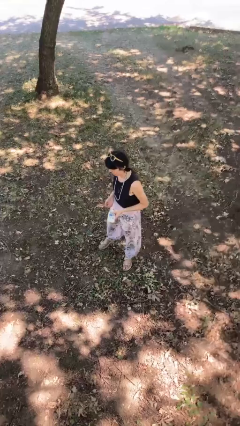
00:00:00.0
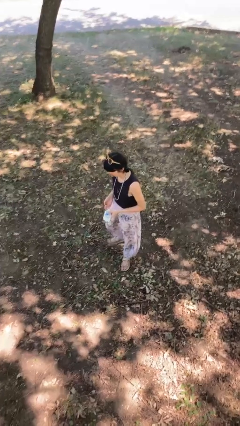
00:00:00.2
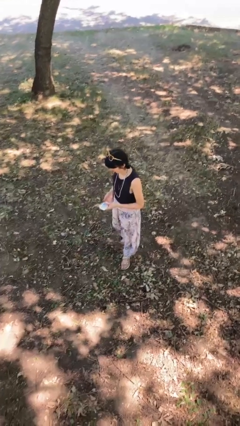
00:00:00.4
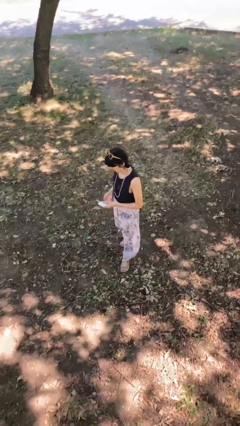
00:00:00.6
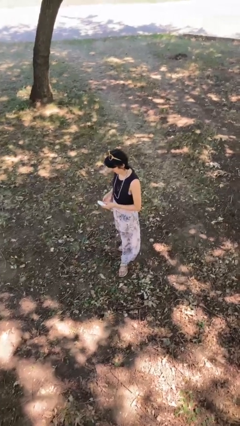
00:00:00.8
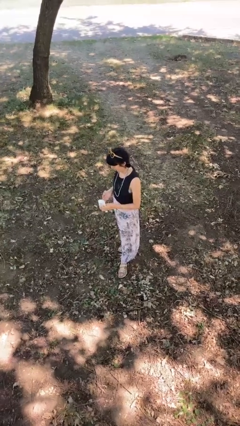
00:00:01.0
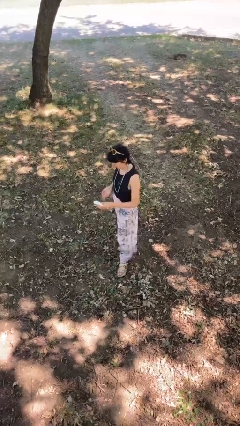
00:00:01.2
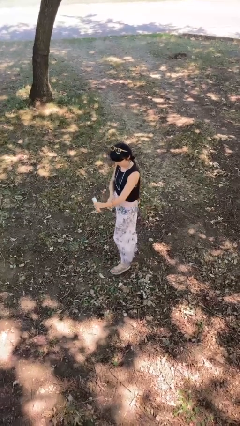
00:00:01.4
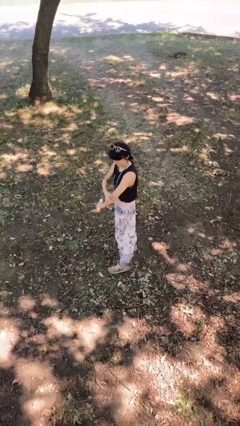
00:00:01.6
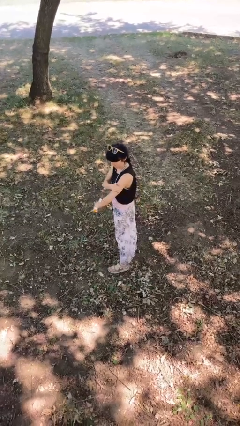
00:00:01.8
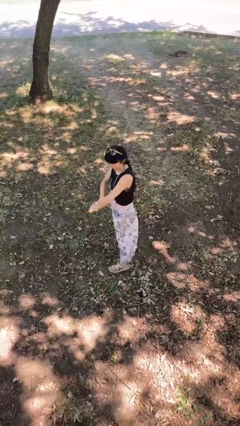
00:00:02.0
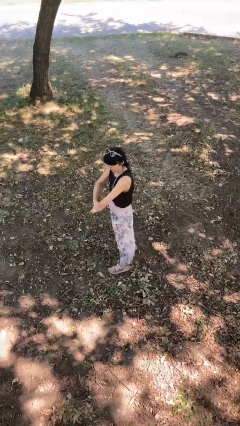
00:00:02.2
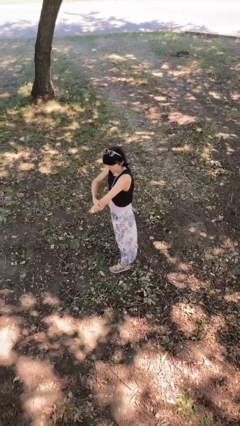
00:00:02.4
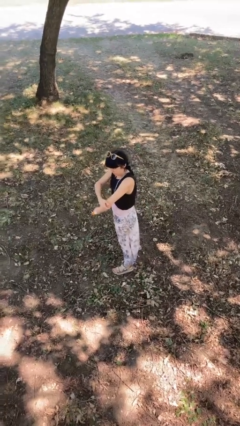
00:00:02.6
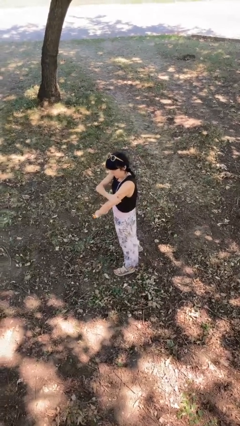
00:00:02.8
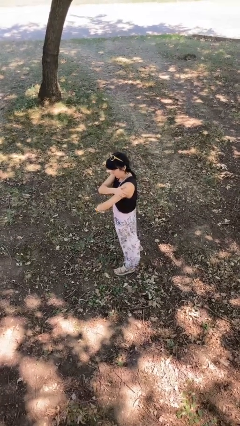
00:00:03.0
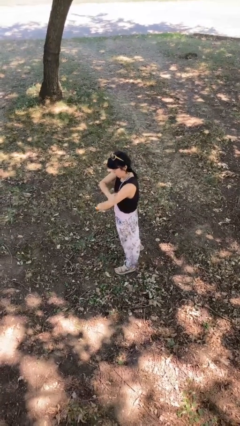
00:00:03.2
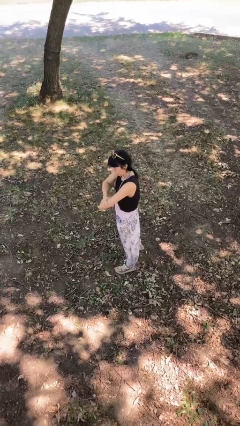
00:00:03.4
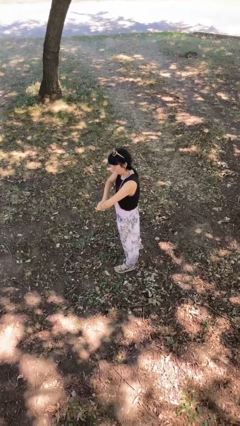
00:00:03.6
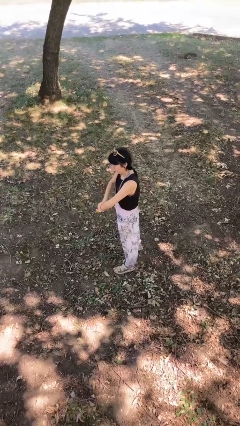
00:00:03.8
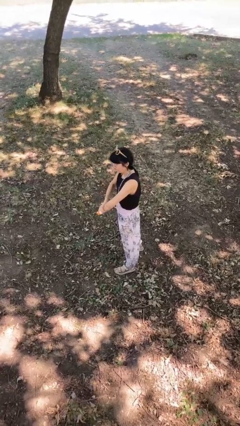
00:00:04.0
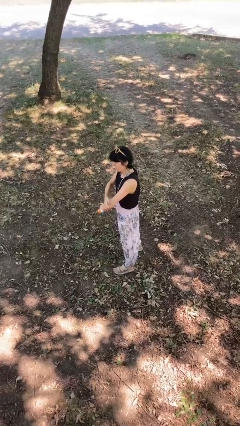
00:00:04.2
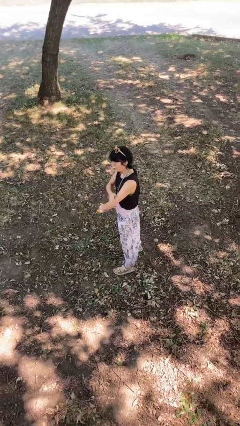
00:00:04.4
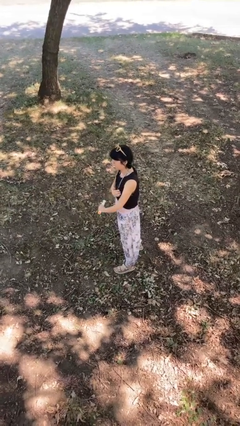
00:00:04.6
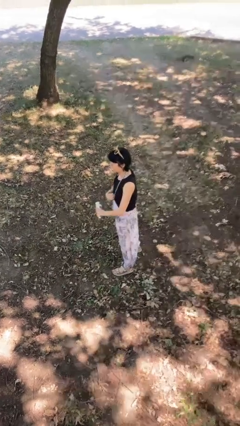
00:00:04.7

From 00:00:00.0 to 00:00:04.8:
person applies sunscreen

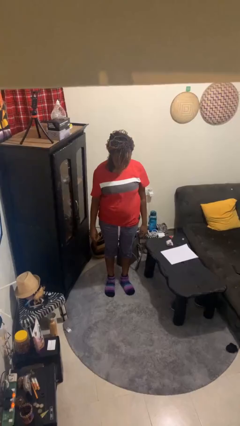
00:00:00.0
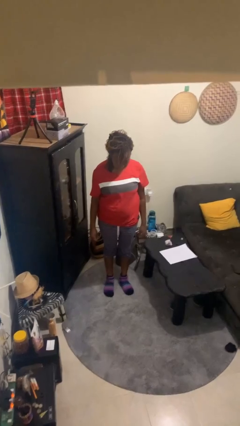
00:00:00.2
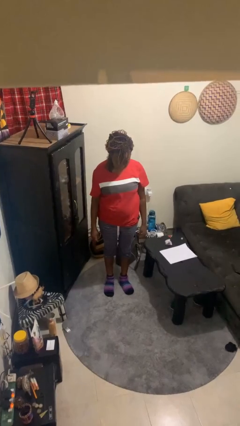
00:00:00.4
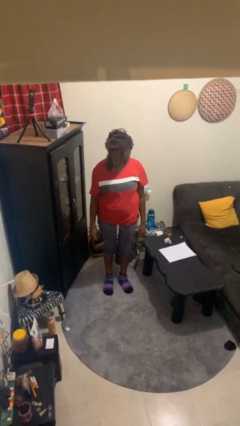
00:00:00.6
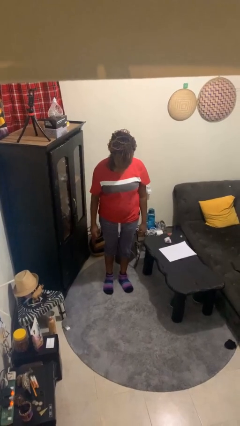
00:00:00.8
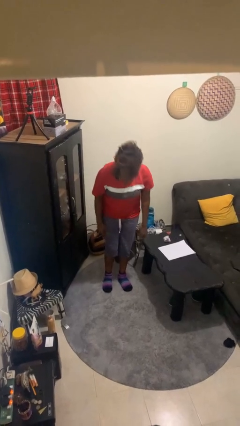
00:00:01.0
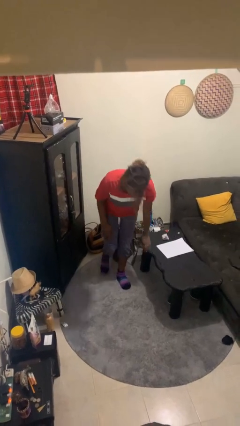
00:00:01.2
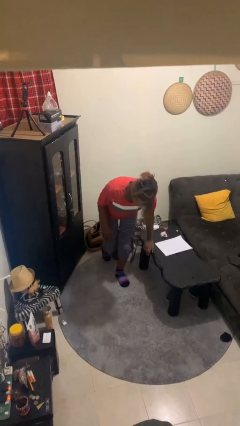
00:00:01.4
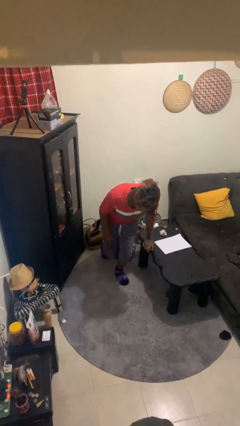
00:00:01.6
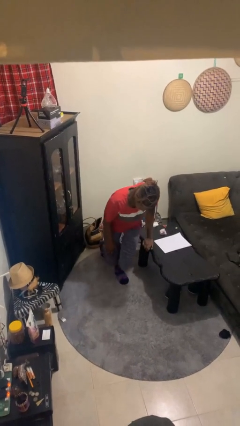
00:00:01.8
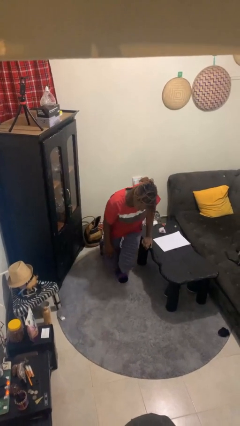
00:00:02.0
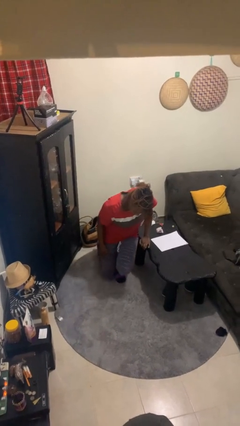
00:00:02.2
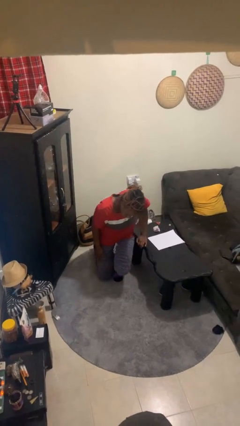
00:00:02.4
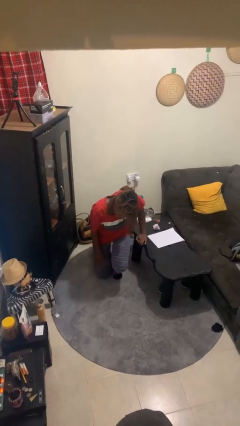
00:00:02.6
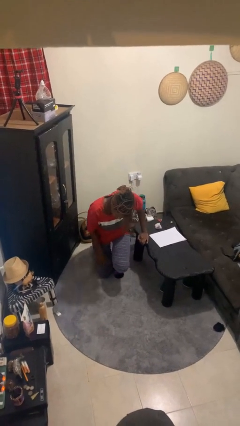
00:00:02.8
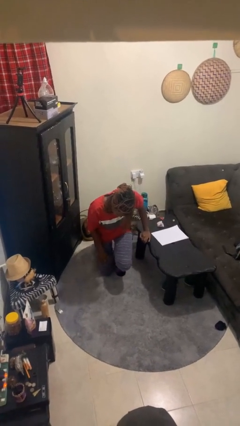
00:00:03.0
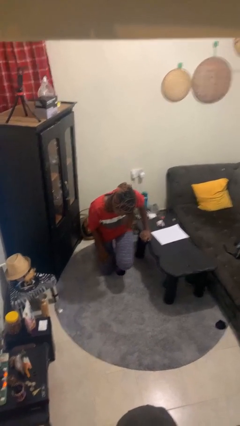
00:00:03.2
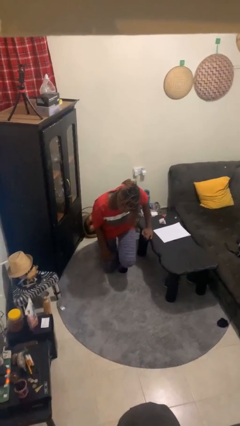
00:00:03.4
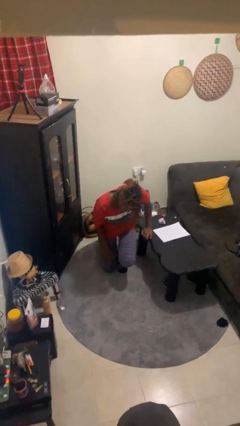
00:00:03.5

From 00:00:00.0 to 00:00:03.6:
person kneels

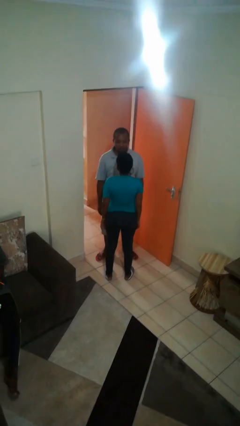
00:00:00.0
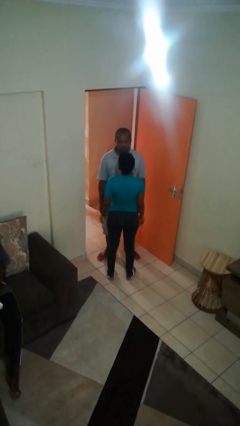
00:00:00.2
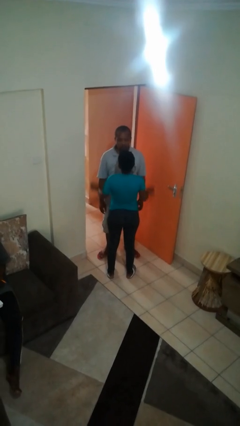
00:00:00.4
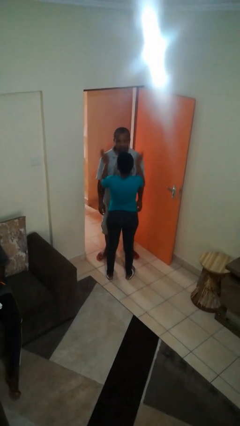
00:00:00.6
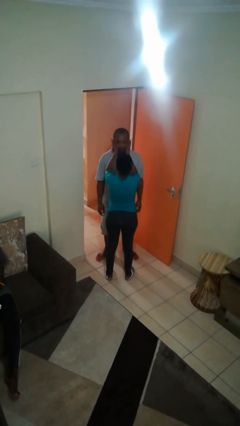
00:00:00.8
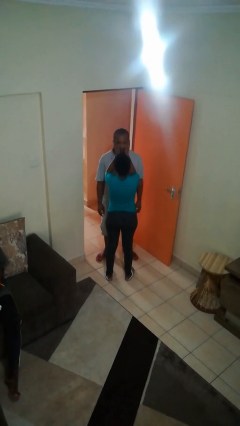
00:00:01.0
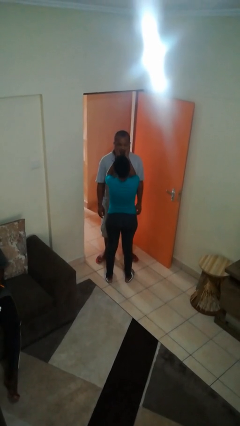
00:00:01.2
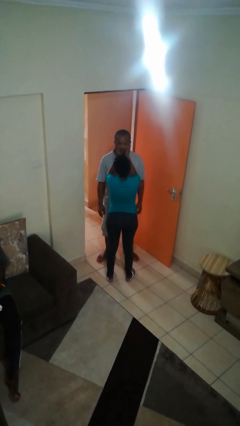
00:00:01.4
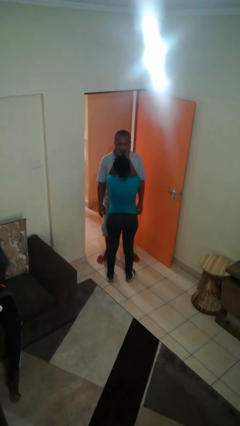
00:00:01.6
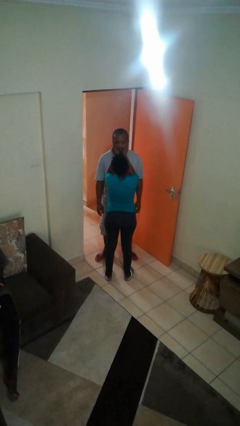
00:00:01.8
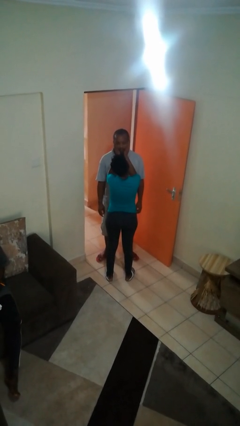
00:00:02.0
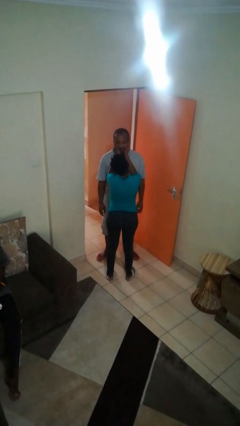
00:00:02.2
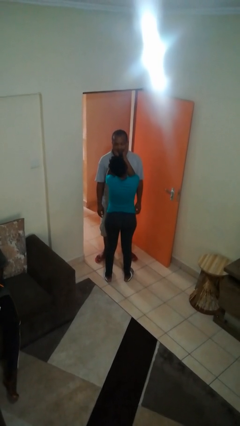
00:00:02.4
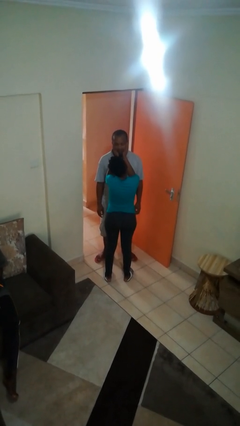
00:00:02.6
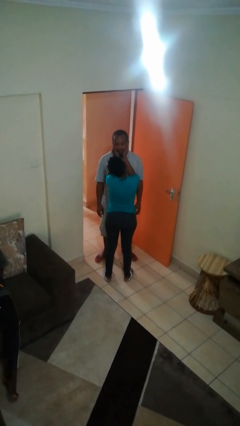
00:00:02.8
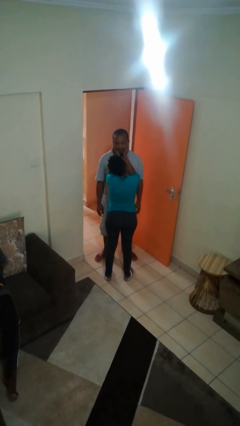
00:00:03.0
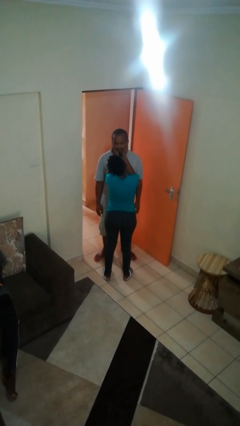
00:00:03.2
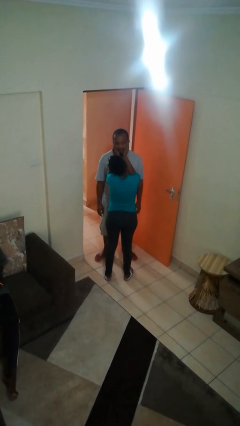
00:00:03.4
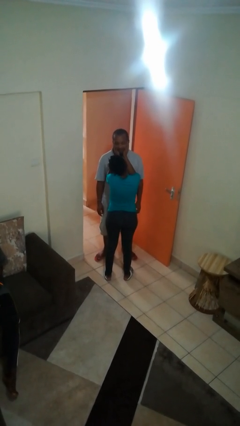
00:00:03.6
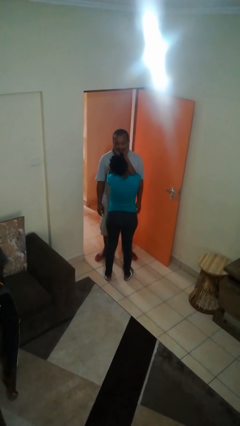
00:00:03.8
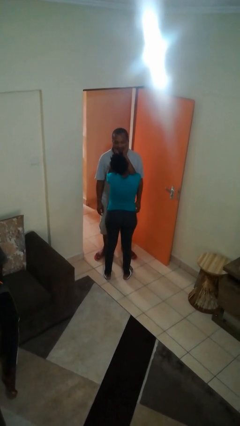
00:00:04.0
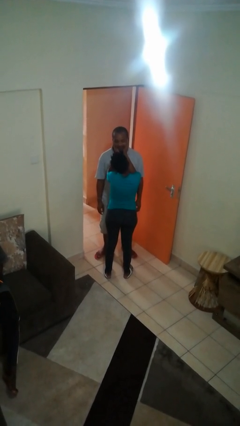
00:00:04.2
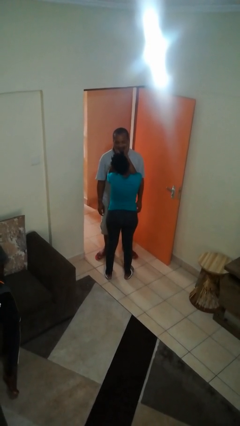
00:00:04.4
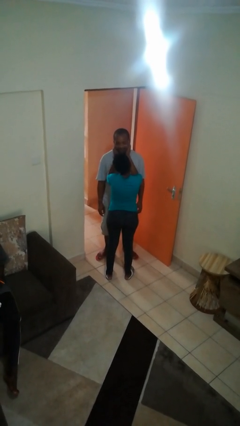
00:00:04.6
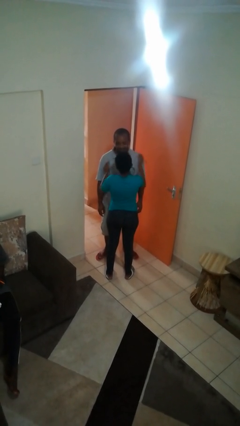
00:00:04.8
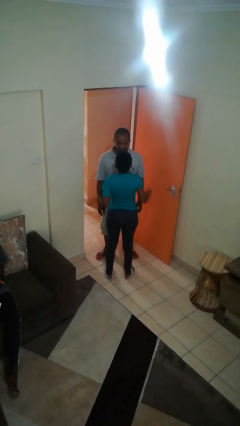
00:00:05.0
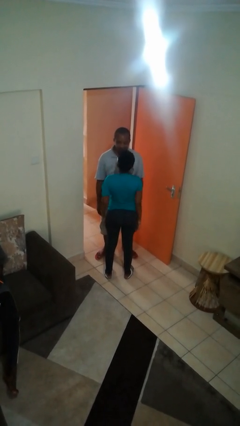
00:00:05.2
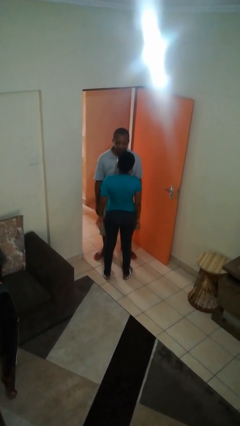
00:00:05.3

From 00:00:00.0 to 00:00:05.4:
person touches face of person

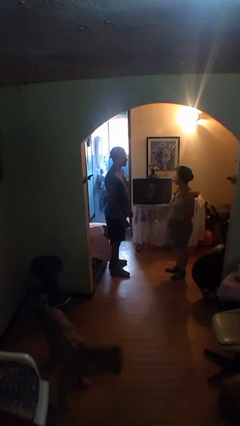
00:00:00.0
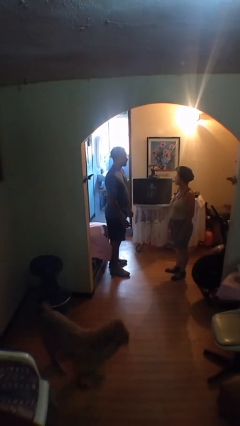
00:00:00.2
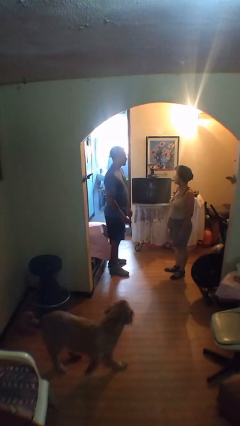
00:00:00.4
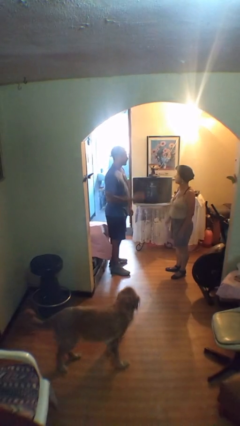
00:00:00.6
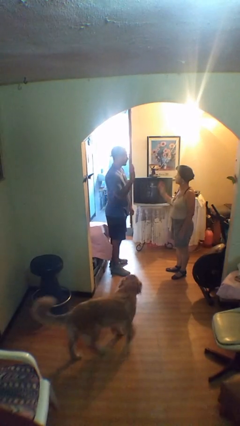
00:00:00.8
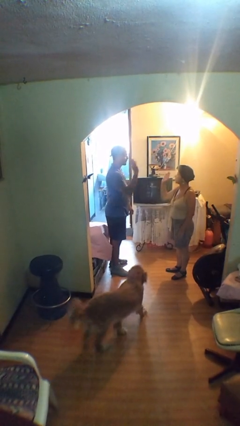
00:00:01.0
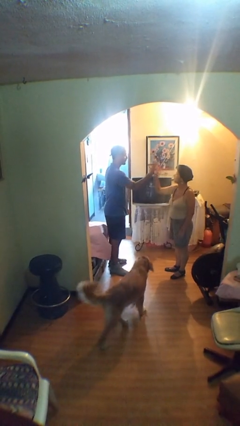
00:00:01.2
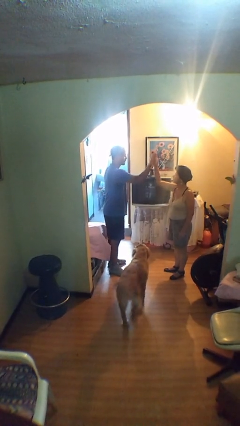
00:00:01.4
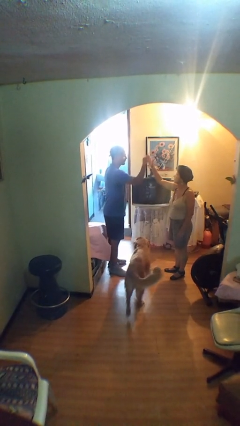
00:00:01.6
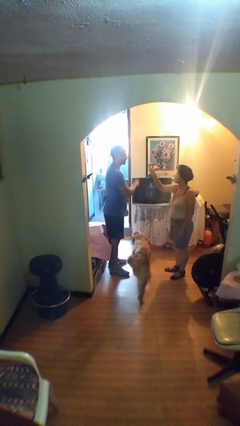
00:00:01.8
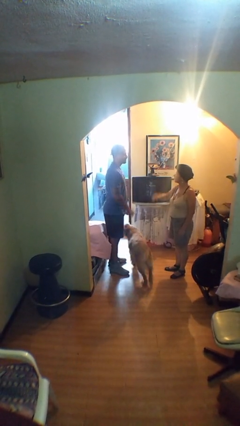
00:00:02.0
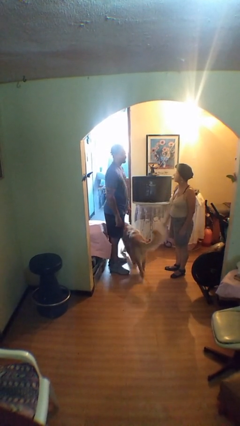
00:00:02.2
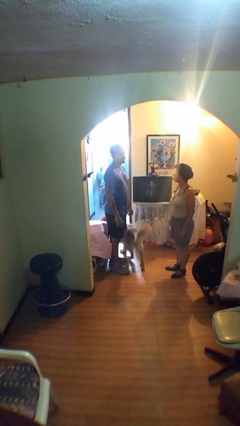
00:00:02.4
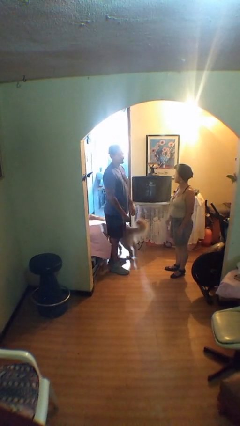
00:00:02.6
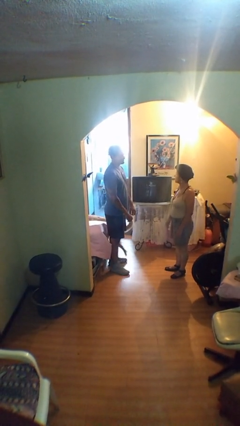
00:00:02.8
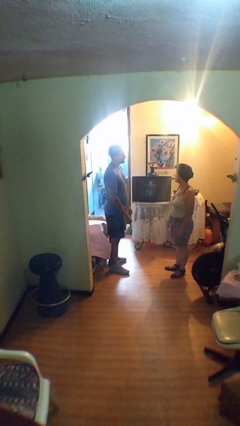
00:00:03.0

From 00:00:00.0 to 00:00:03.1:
person highfives hand

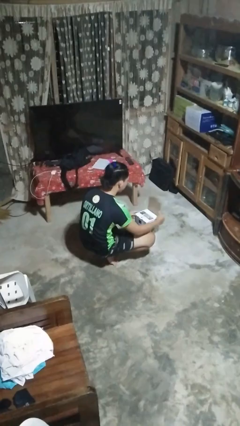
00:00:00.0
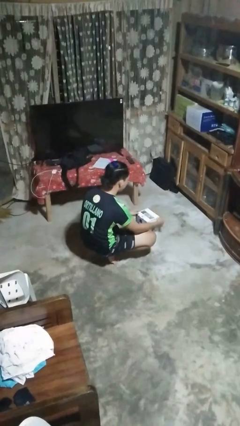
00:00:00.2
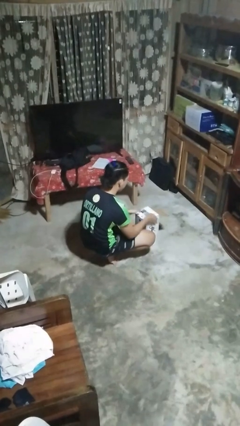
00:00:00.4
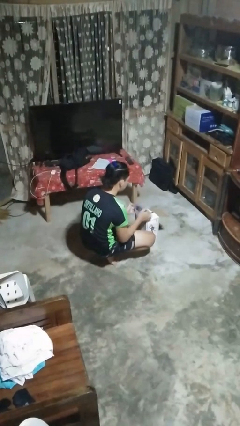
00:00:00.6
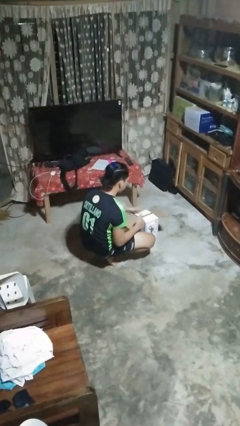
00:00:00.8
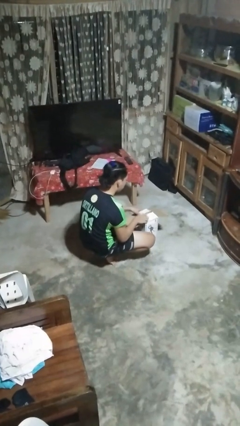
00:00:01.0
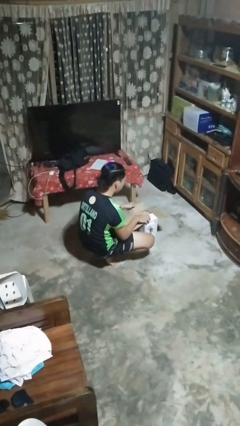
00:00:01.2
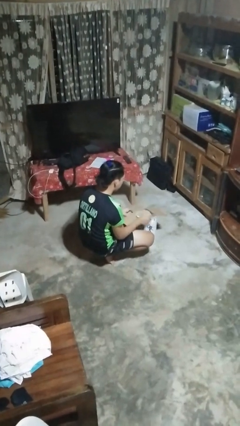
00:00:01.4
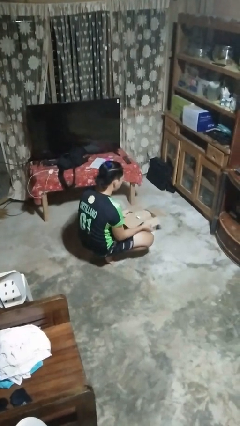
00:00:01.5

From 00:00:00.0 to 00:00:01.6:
person opens box
